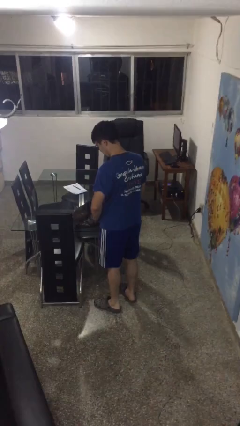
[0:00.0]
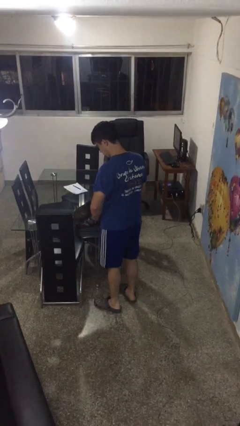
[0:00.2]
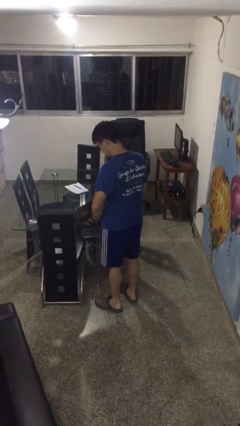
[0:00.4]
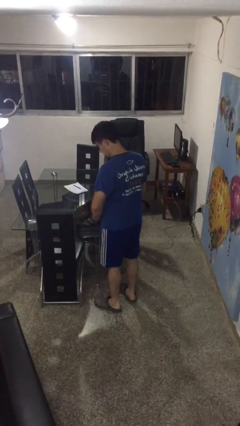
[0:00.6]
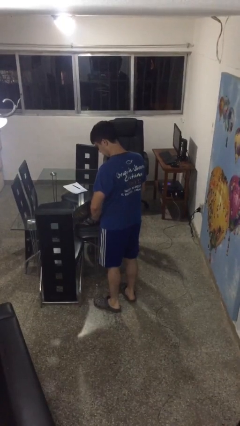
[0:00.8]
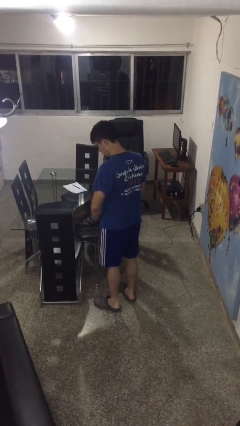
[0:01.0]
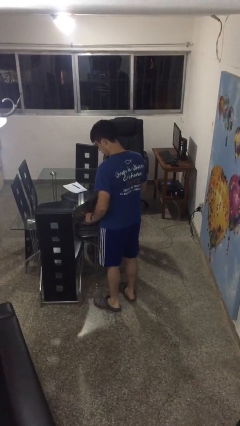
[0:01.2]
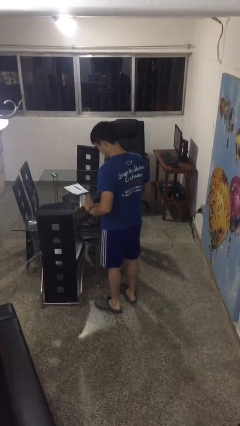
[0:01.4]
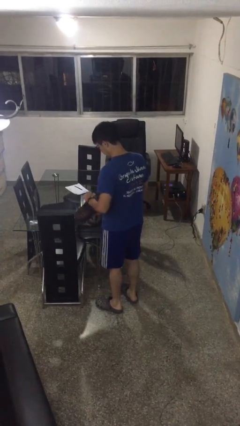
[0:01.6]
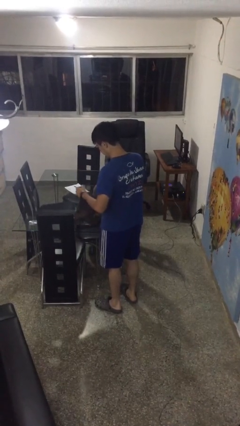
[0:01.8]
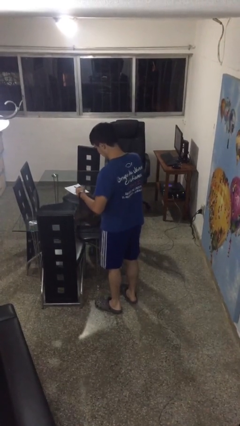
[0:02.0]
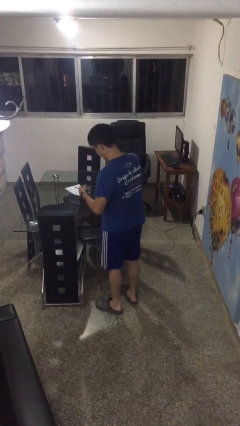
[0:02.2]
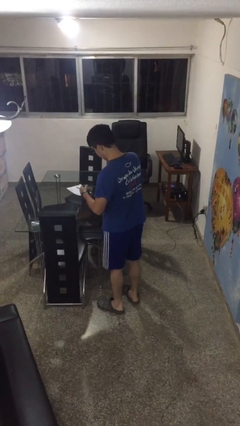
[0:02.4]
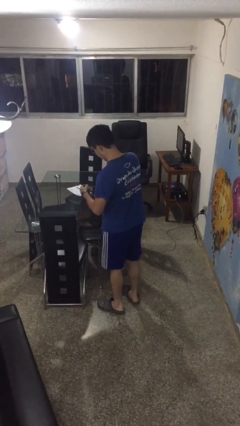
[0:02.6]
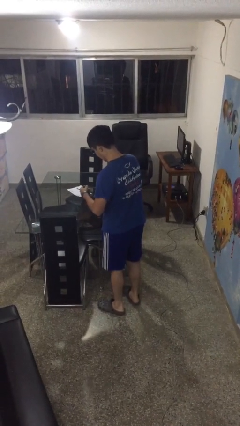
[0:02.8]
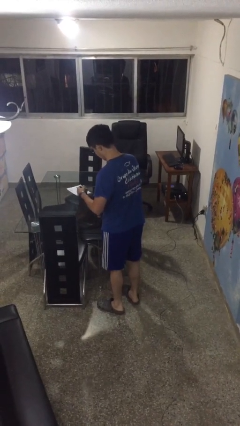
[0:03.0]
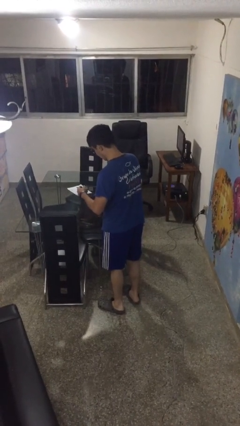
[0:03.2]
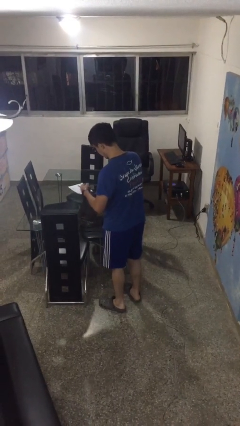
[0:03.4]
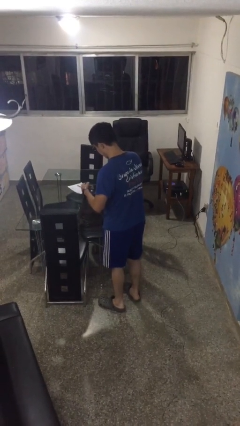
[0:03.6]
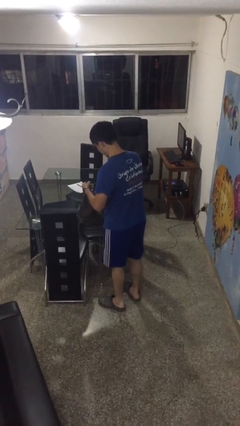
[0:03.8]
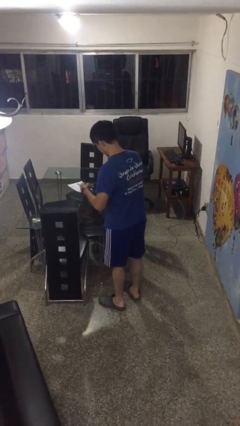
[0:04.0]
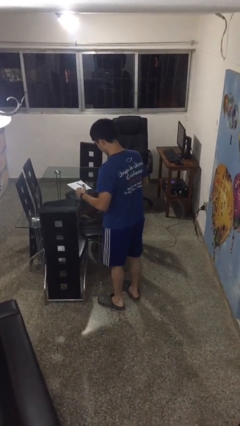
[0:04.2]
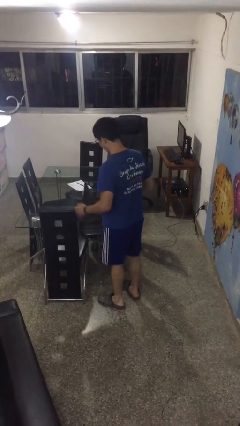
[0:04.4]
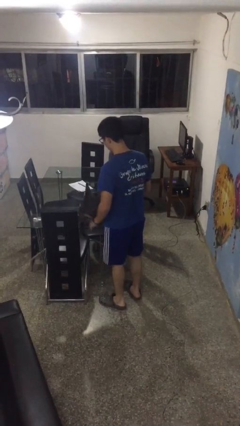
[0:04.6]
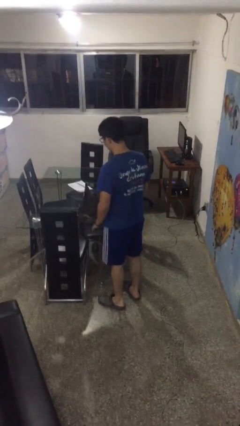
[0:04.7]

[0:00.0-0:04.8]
person searches in bag

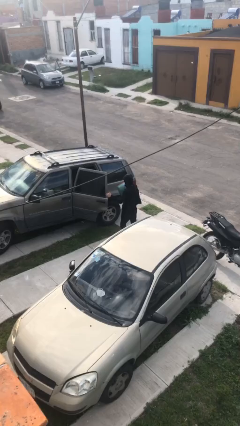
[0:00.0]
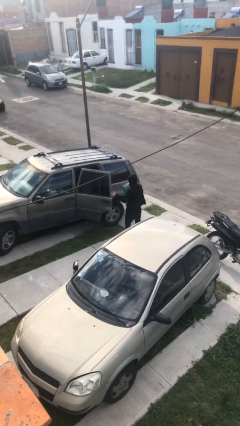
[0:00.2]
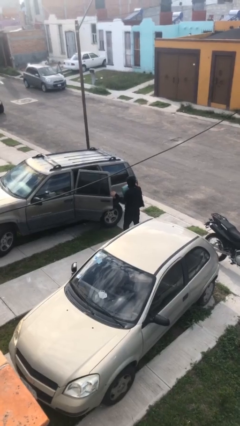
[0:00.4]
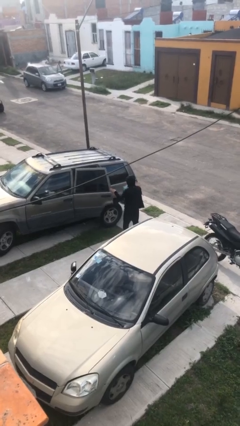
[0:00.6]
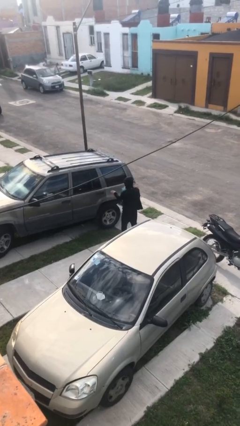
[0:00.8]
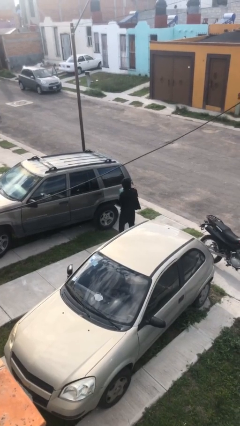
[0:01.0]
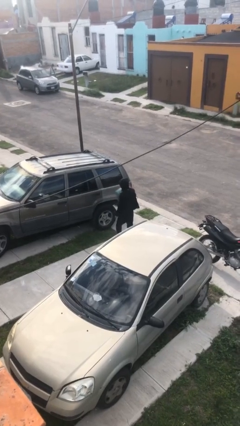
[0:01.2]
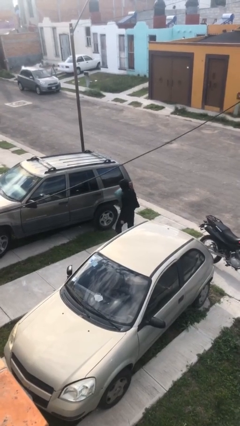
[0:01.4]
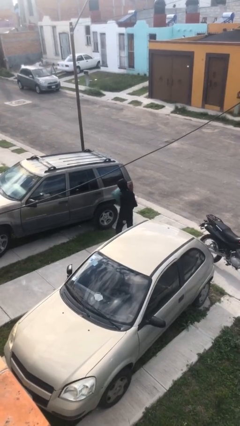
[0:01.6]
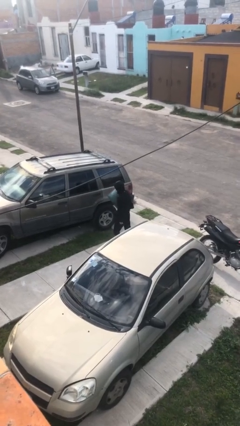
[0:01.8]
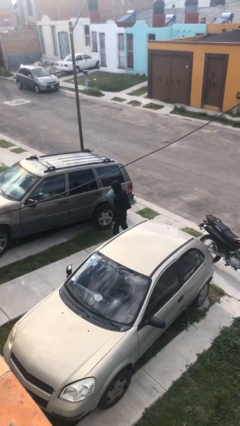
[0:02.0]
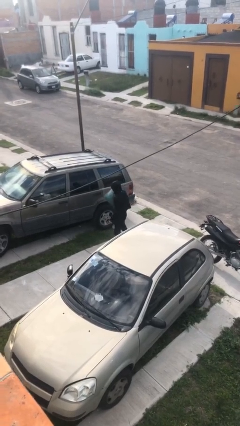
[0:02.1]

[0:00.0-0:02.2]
person closes car door

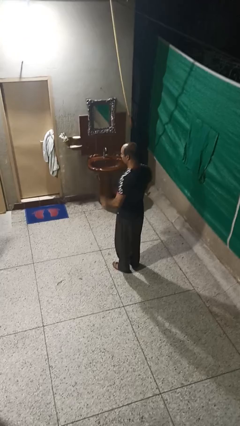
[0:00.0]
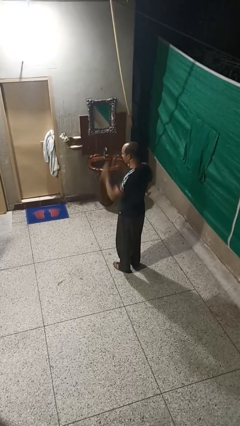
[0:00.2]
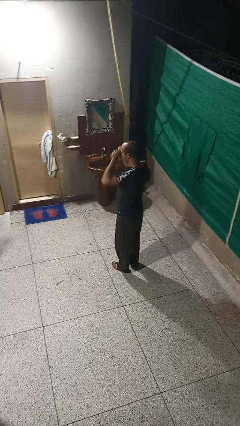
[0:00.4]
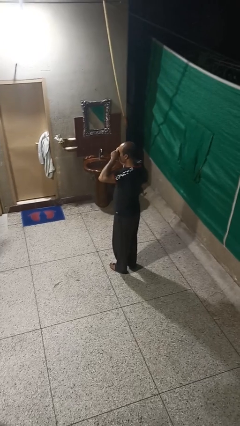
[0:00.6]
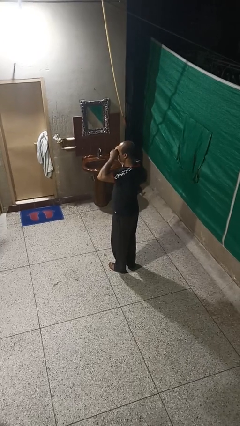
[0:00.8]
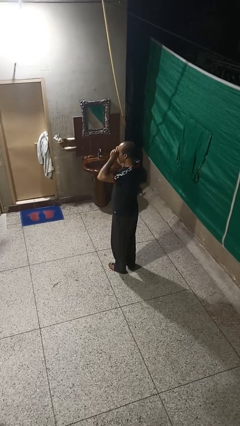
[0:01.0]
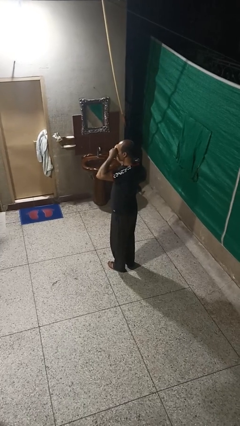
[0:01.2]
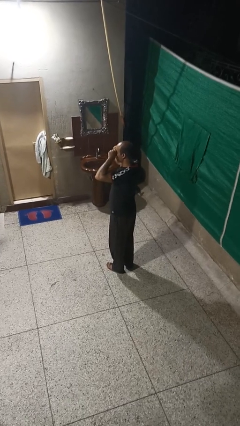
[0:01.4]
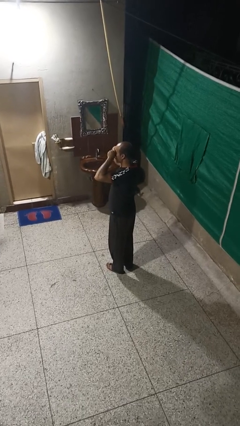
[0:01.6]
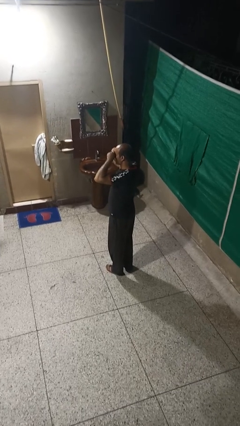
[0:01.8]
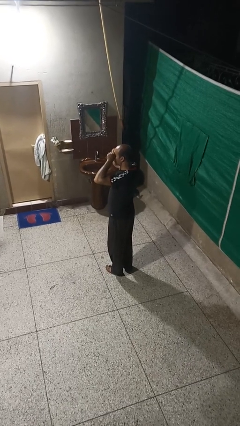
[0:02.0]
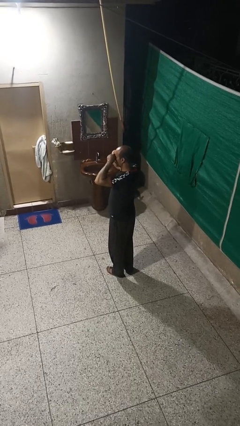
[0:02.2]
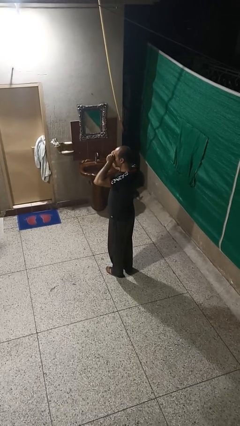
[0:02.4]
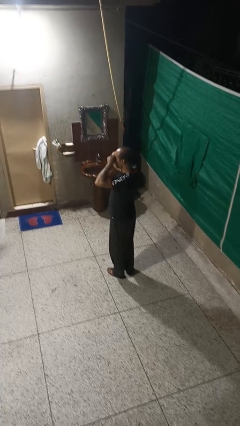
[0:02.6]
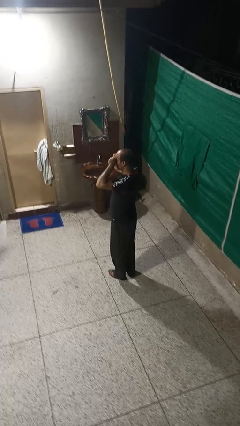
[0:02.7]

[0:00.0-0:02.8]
person rubs eyes

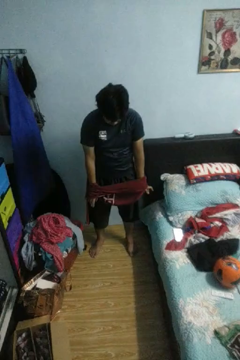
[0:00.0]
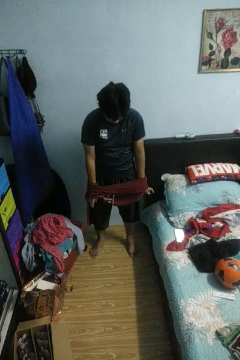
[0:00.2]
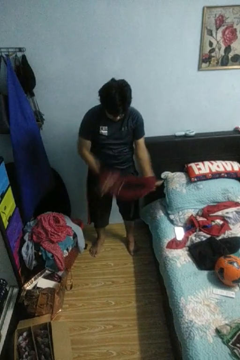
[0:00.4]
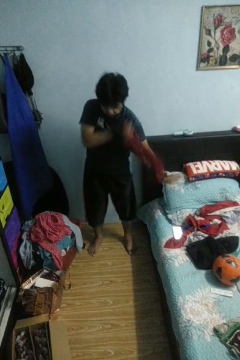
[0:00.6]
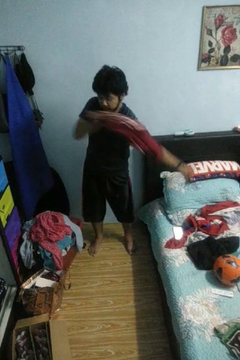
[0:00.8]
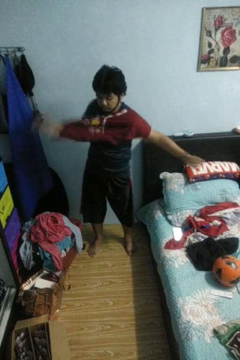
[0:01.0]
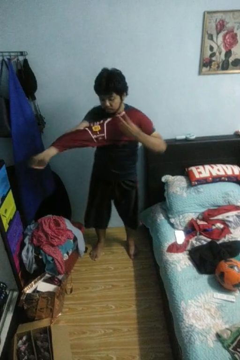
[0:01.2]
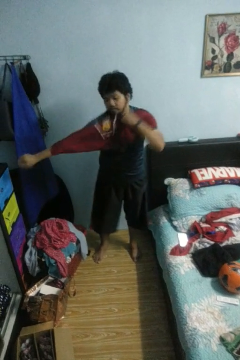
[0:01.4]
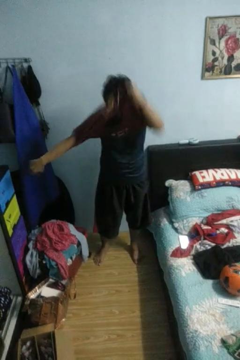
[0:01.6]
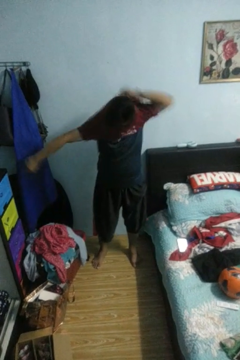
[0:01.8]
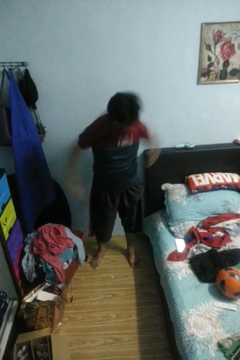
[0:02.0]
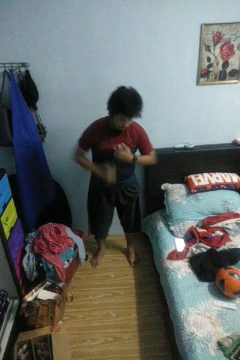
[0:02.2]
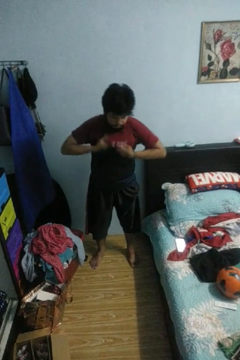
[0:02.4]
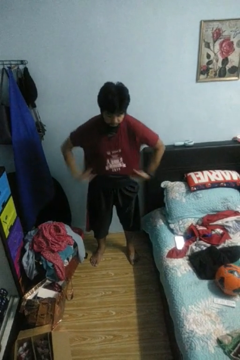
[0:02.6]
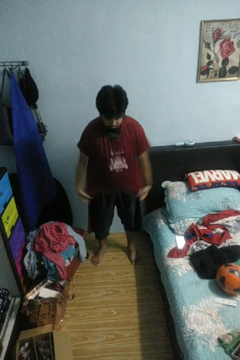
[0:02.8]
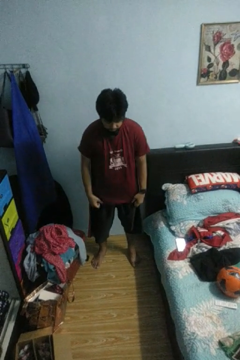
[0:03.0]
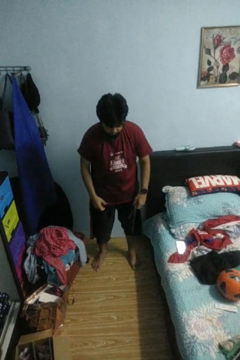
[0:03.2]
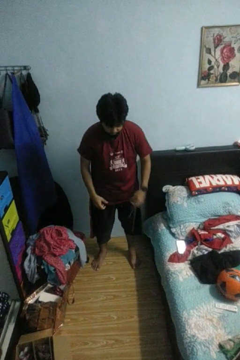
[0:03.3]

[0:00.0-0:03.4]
person puts on shirt

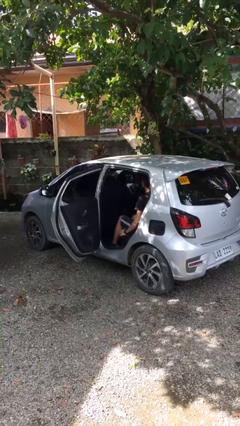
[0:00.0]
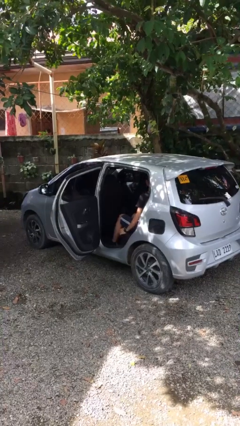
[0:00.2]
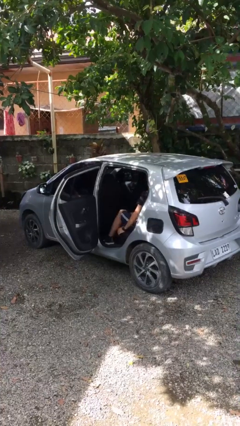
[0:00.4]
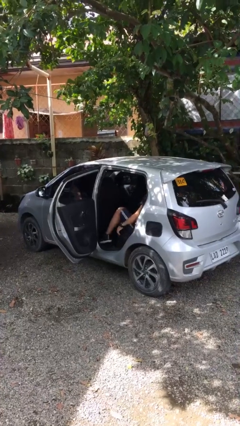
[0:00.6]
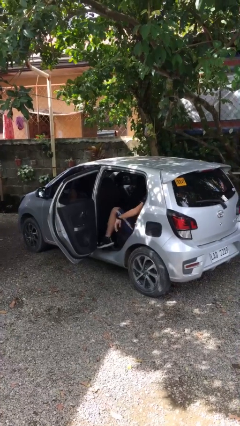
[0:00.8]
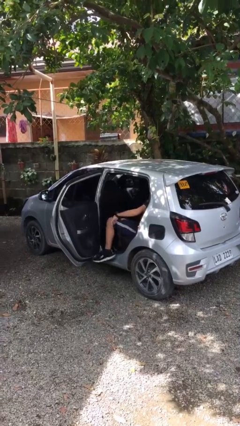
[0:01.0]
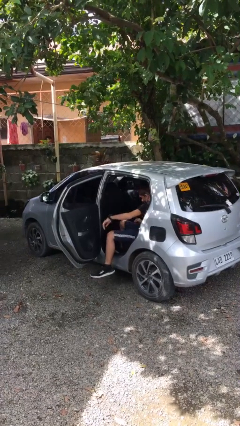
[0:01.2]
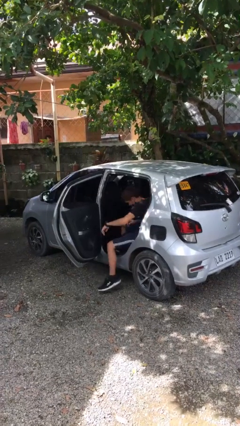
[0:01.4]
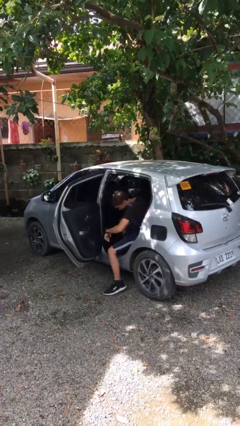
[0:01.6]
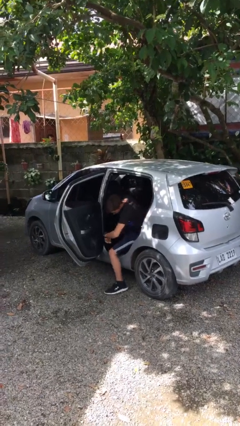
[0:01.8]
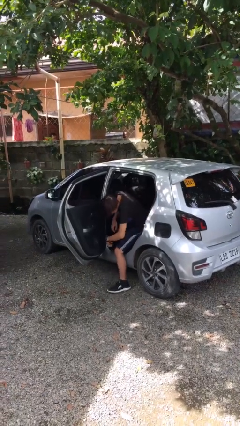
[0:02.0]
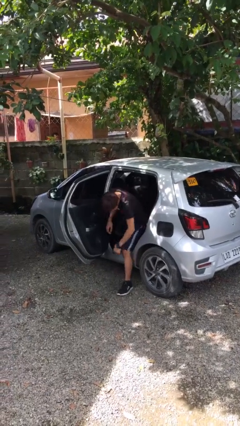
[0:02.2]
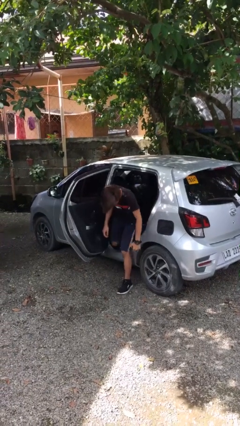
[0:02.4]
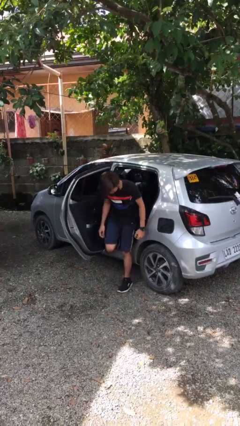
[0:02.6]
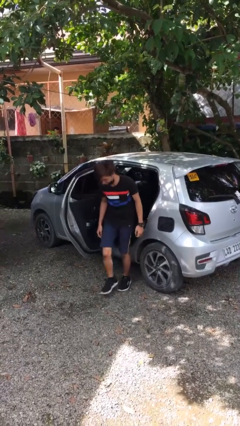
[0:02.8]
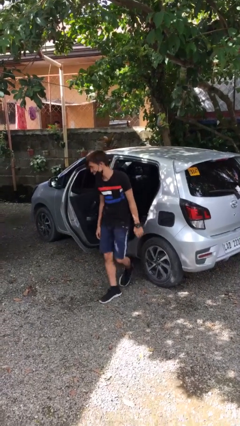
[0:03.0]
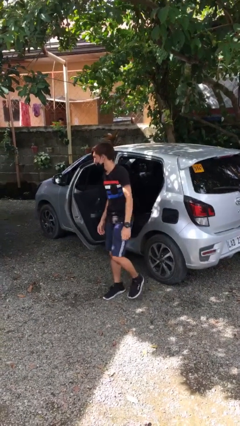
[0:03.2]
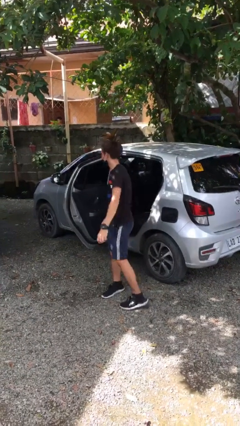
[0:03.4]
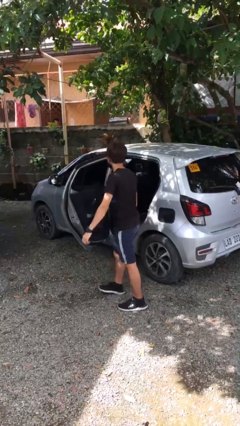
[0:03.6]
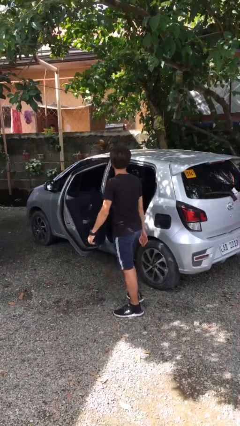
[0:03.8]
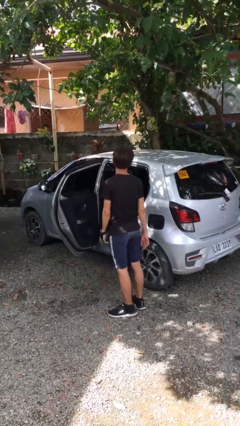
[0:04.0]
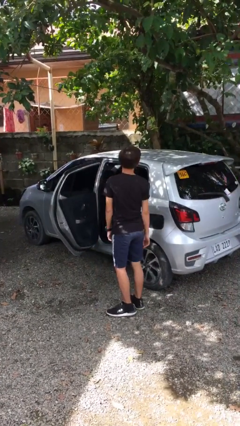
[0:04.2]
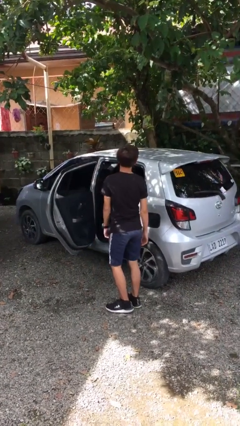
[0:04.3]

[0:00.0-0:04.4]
person exits car

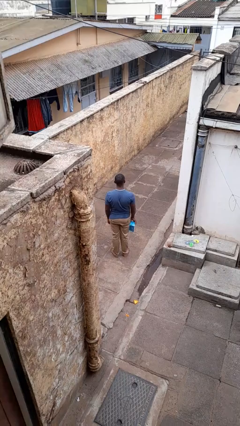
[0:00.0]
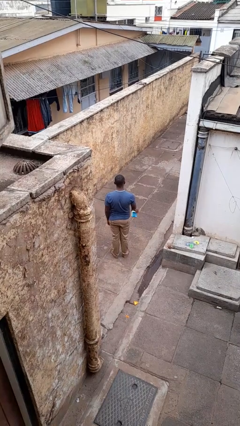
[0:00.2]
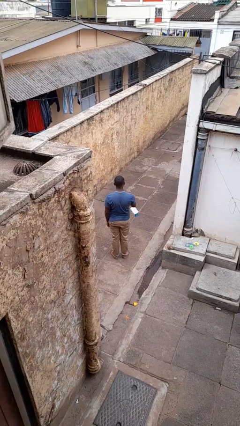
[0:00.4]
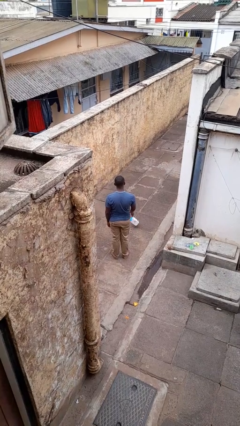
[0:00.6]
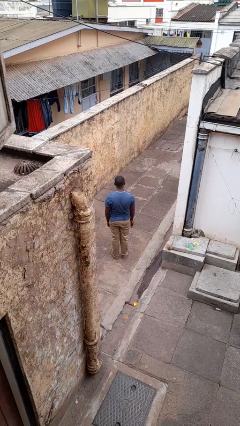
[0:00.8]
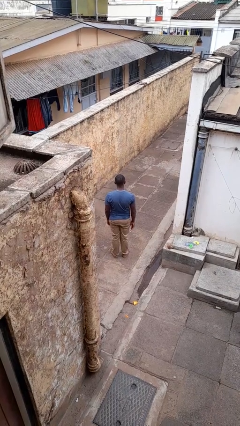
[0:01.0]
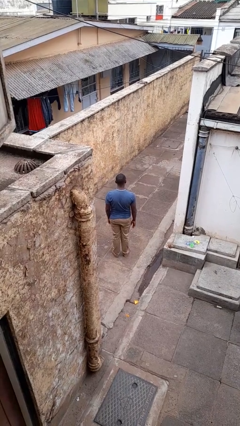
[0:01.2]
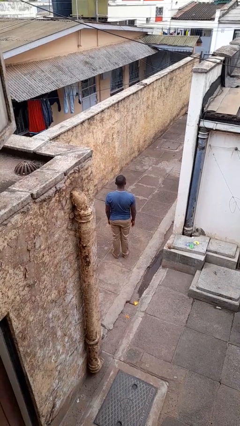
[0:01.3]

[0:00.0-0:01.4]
person throws object to ground
